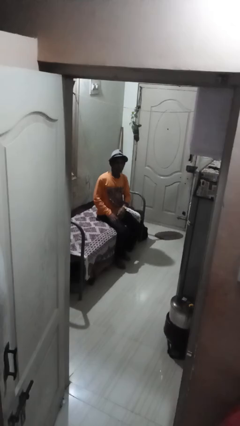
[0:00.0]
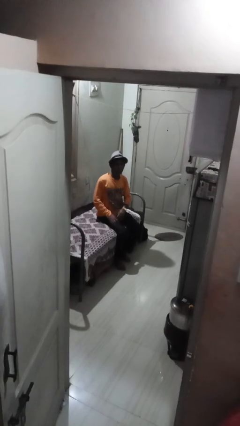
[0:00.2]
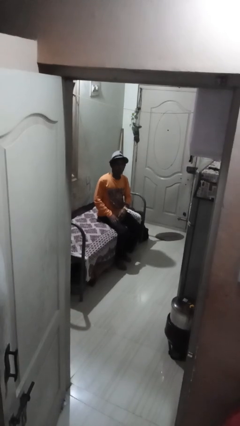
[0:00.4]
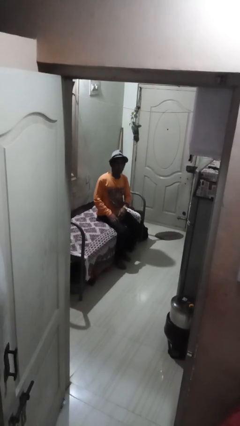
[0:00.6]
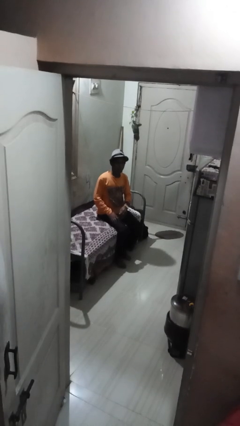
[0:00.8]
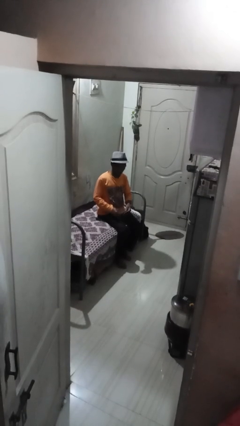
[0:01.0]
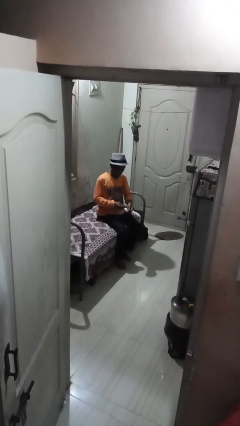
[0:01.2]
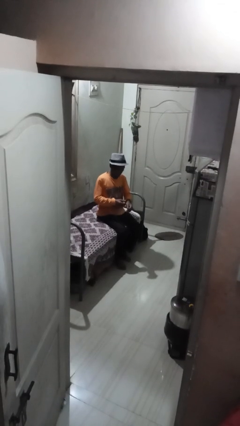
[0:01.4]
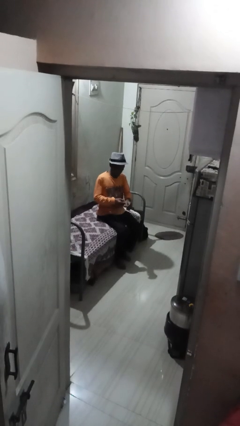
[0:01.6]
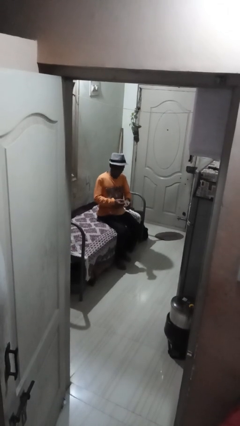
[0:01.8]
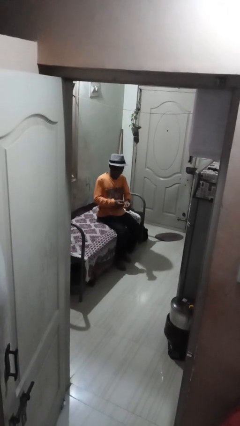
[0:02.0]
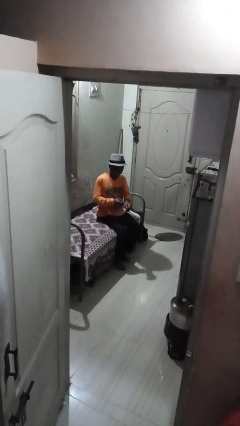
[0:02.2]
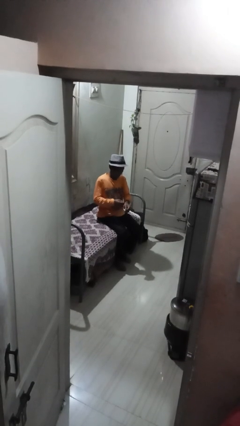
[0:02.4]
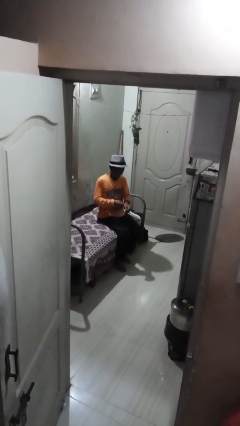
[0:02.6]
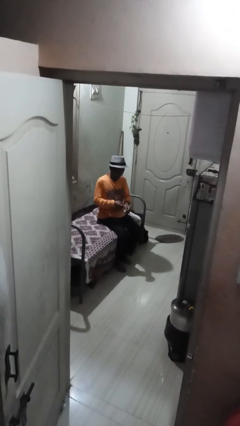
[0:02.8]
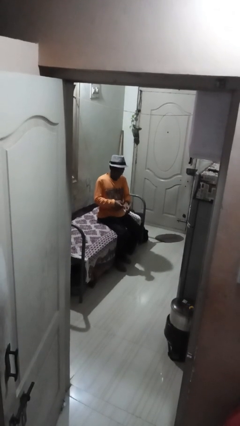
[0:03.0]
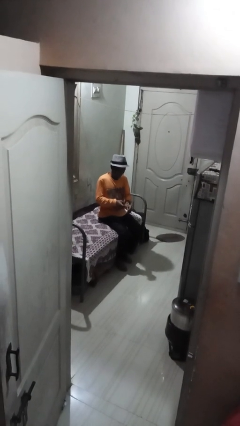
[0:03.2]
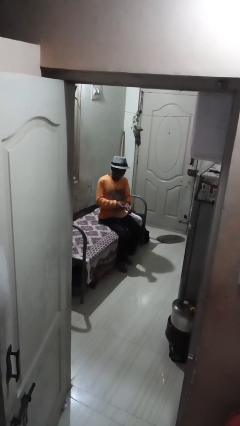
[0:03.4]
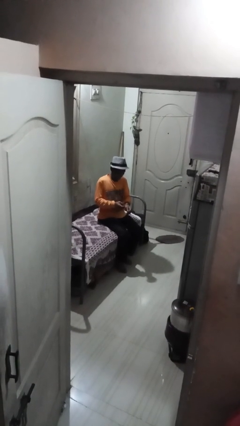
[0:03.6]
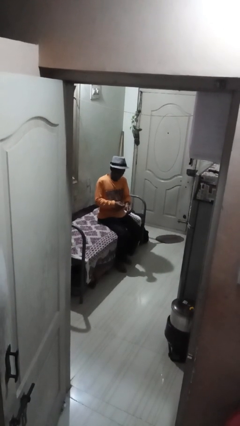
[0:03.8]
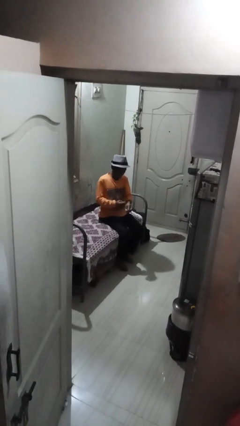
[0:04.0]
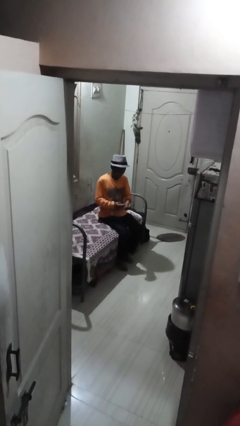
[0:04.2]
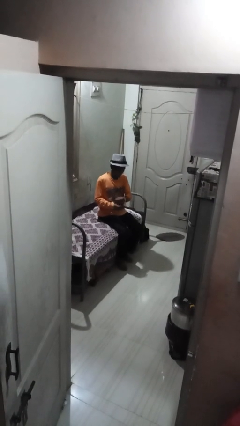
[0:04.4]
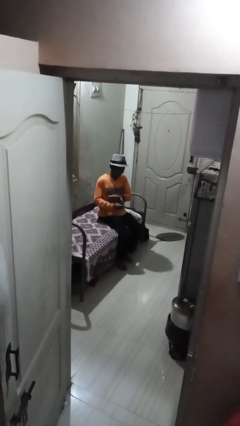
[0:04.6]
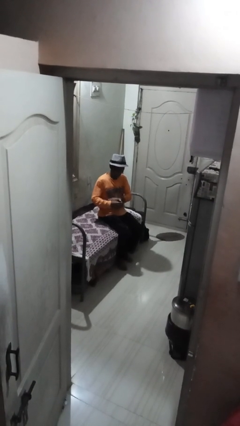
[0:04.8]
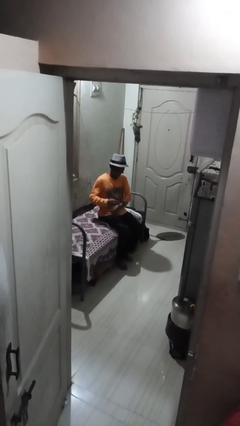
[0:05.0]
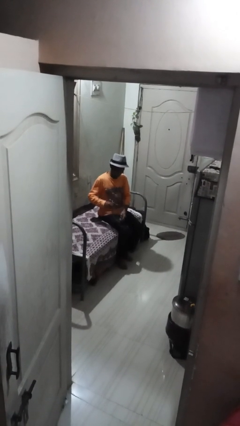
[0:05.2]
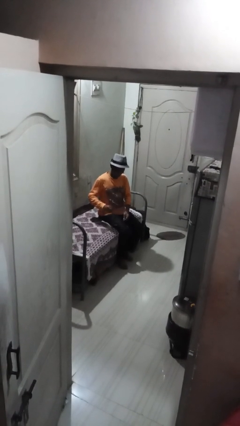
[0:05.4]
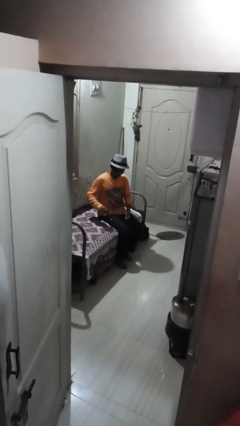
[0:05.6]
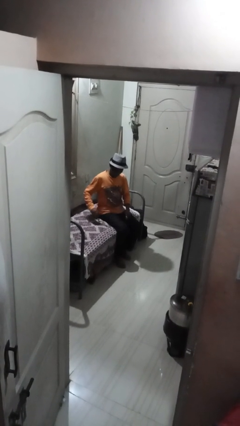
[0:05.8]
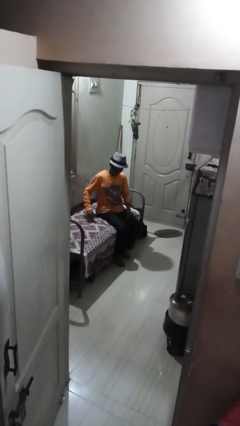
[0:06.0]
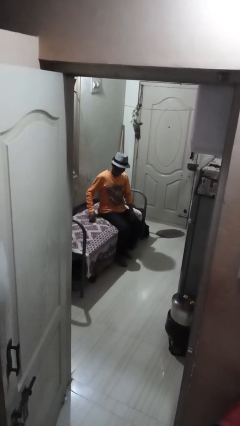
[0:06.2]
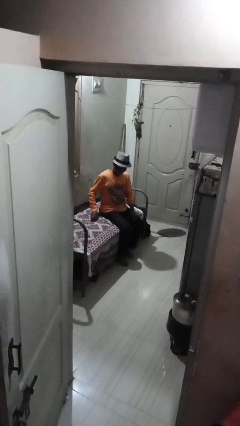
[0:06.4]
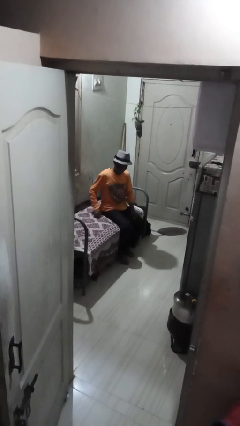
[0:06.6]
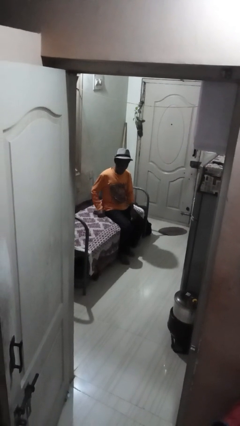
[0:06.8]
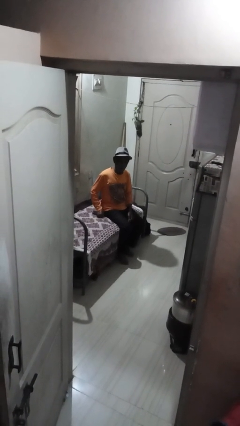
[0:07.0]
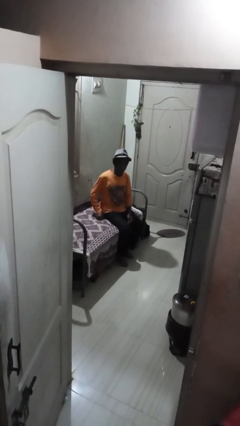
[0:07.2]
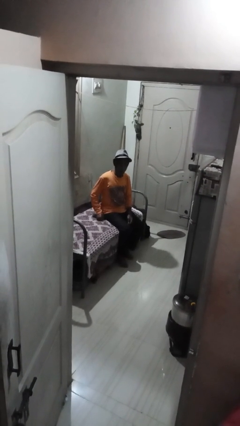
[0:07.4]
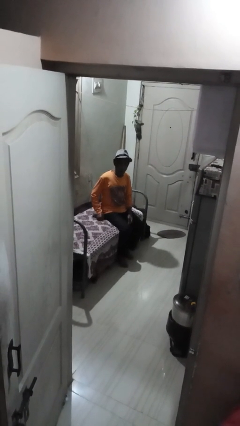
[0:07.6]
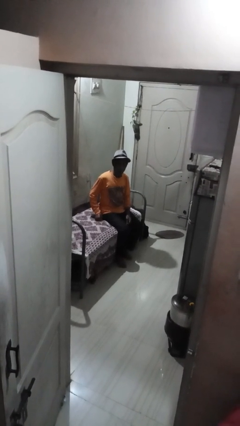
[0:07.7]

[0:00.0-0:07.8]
person takes off wristwatch

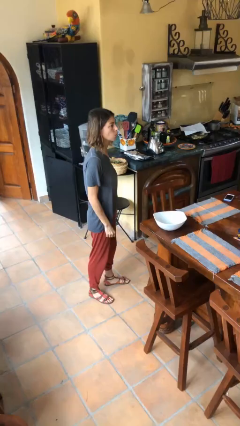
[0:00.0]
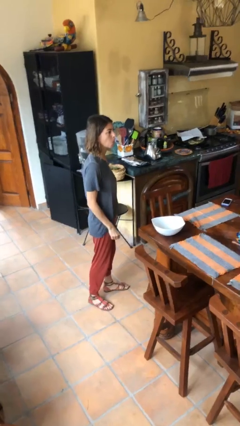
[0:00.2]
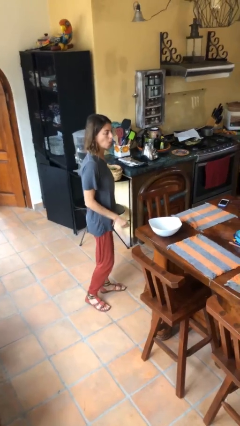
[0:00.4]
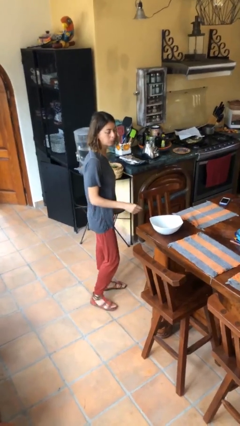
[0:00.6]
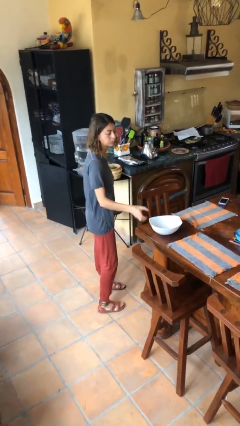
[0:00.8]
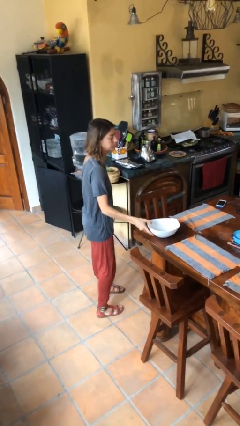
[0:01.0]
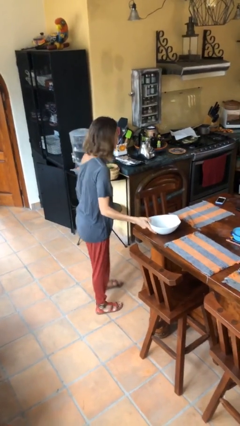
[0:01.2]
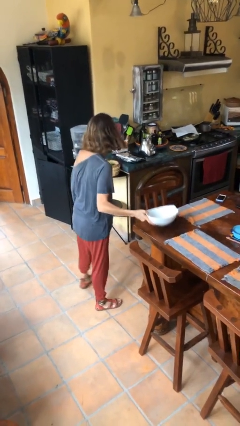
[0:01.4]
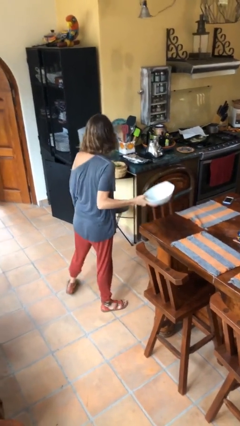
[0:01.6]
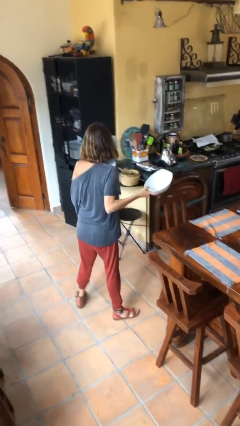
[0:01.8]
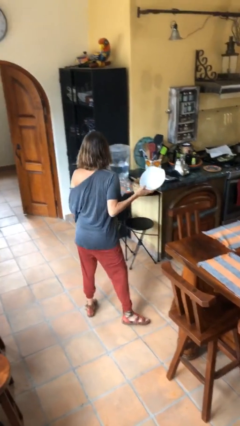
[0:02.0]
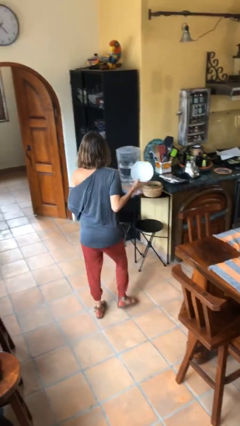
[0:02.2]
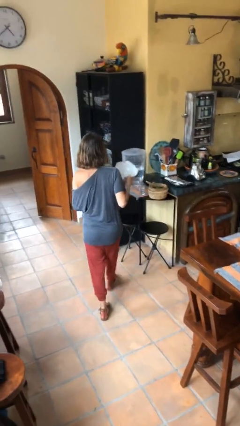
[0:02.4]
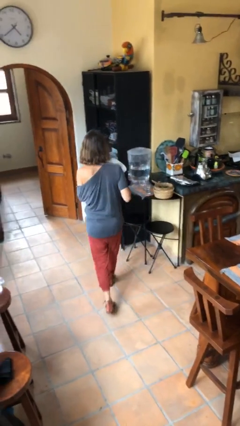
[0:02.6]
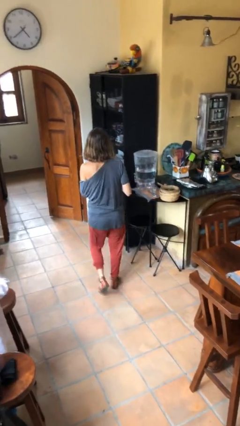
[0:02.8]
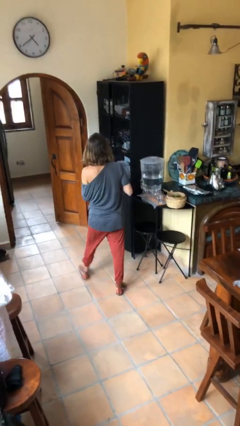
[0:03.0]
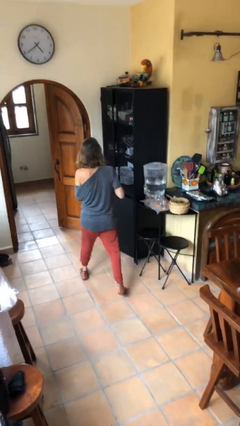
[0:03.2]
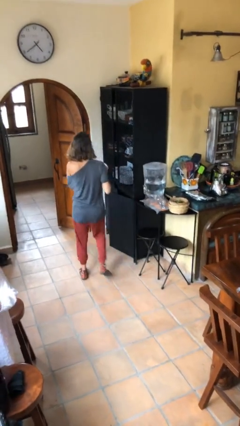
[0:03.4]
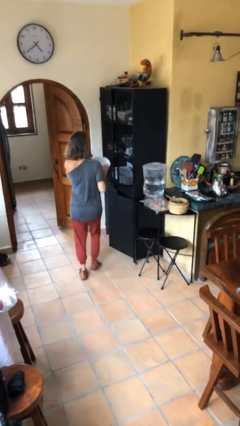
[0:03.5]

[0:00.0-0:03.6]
person picks up object from table

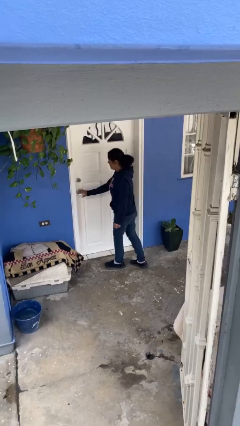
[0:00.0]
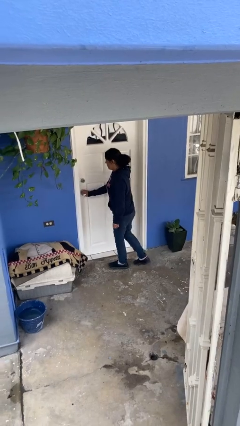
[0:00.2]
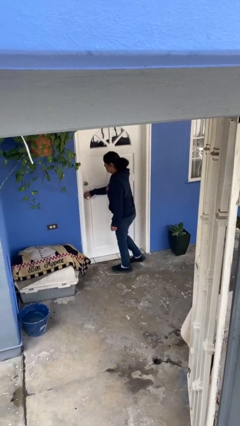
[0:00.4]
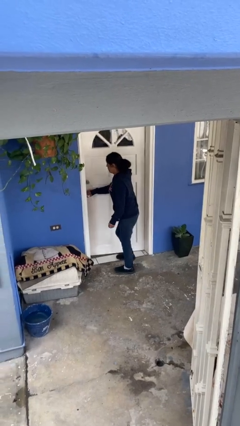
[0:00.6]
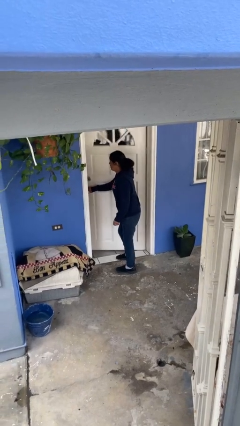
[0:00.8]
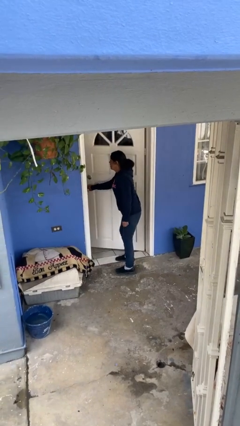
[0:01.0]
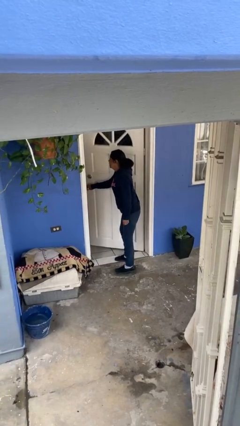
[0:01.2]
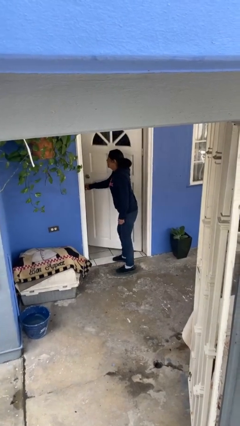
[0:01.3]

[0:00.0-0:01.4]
person opens facility door

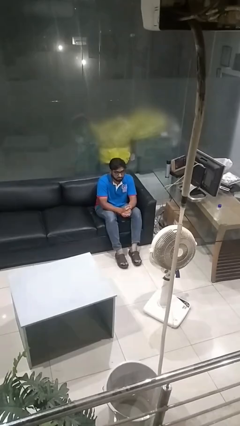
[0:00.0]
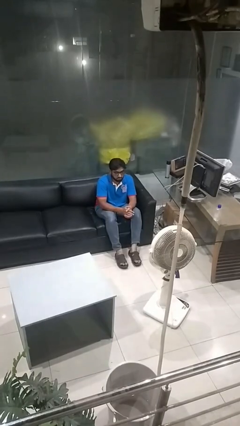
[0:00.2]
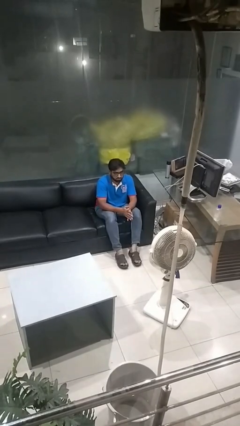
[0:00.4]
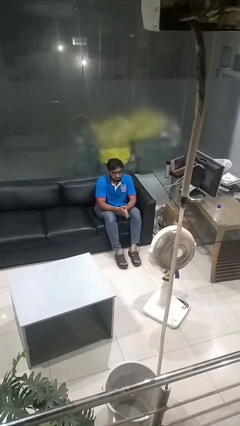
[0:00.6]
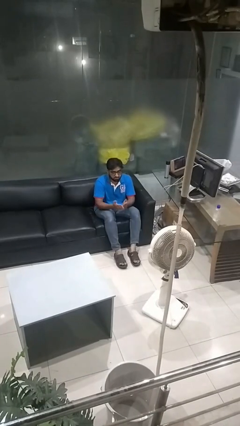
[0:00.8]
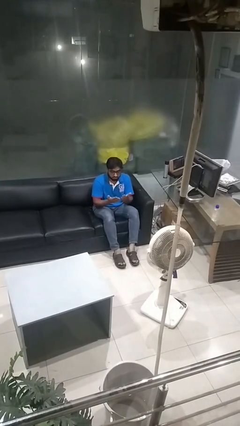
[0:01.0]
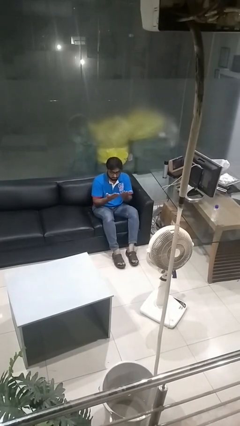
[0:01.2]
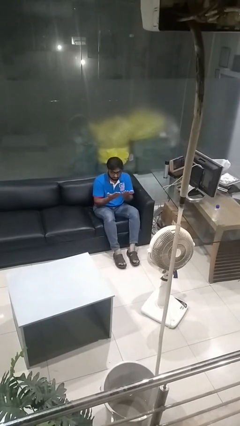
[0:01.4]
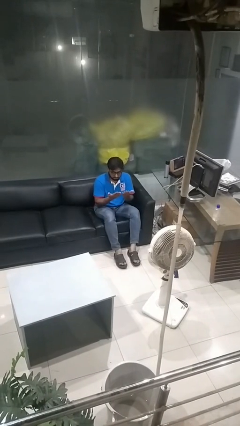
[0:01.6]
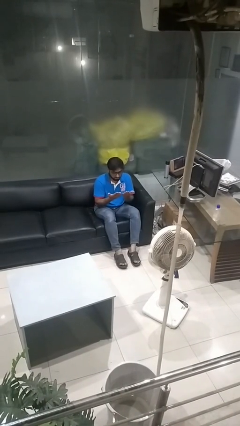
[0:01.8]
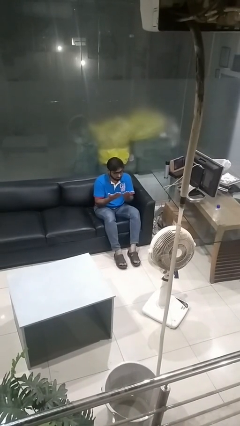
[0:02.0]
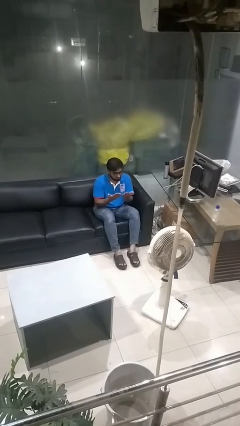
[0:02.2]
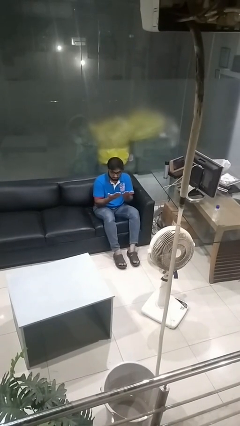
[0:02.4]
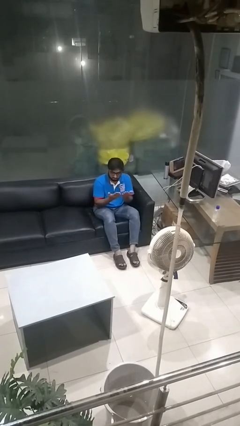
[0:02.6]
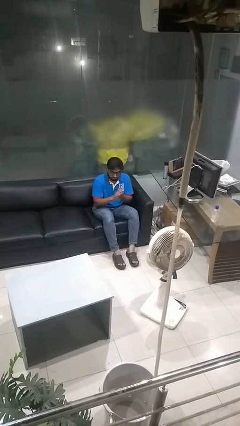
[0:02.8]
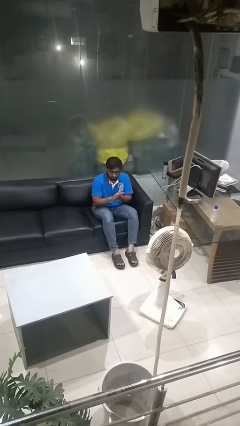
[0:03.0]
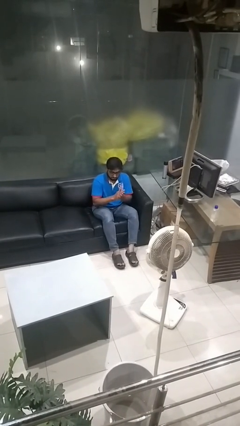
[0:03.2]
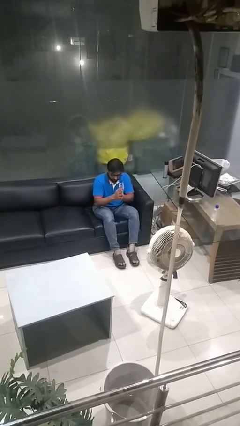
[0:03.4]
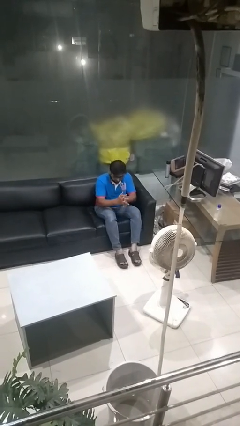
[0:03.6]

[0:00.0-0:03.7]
person looks at hands in lap

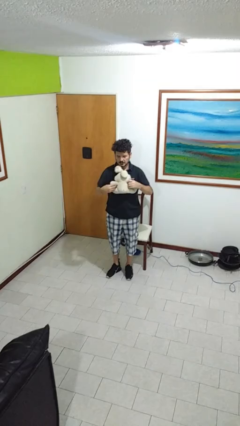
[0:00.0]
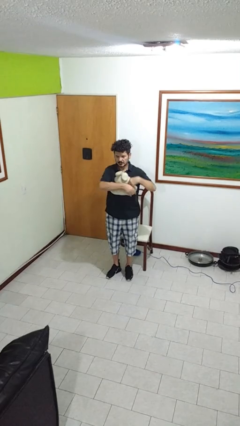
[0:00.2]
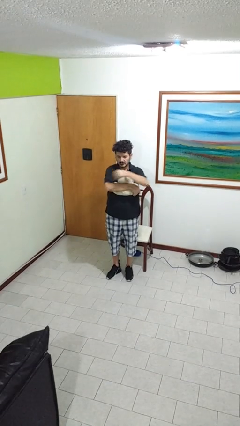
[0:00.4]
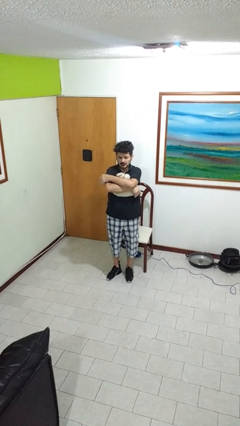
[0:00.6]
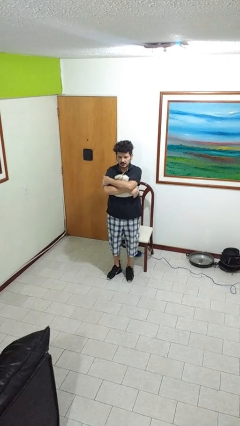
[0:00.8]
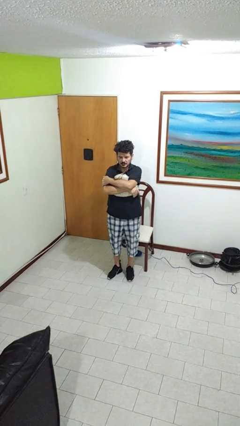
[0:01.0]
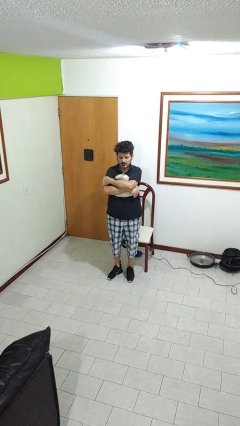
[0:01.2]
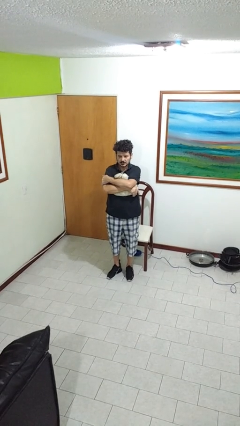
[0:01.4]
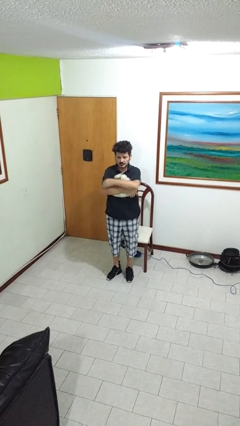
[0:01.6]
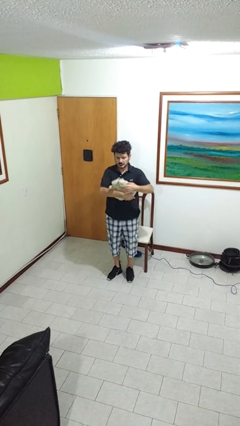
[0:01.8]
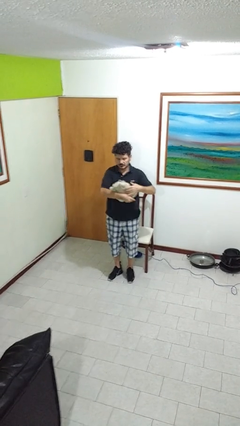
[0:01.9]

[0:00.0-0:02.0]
person hugs stuffed animal
